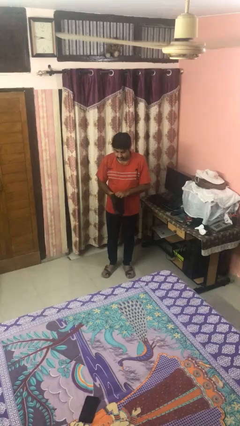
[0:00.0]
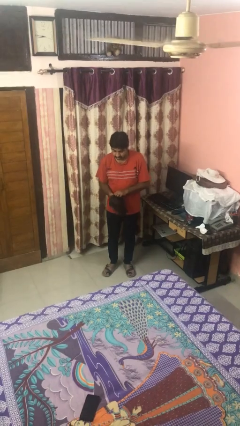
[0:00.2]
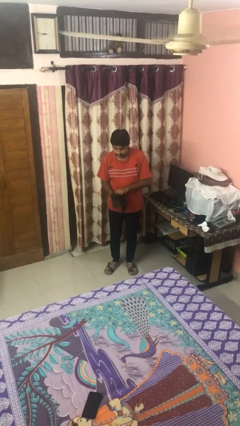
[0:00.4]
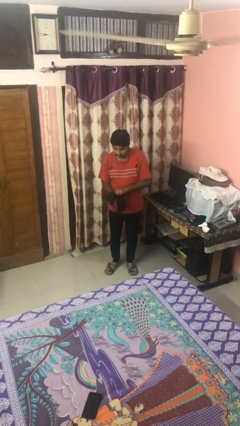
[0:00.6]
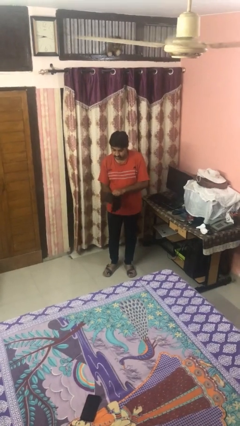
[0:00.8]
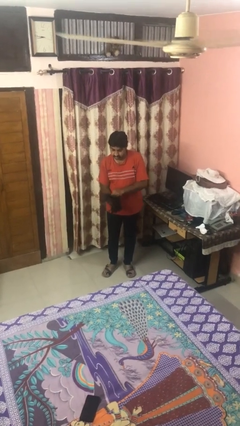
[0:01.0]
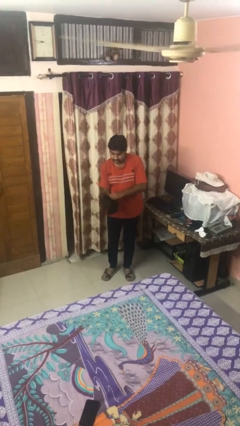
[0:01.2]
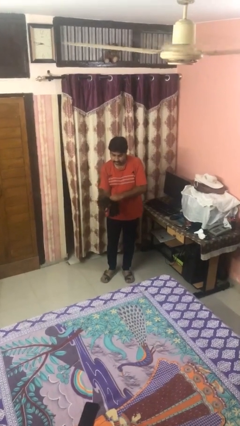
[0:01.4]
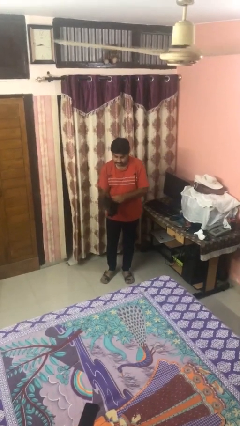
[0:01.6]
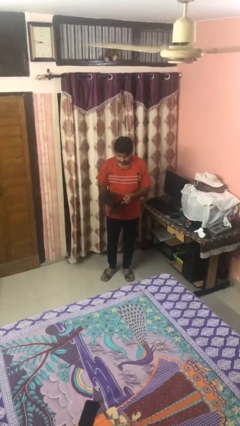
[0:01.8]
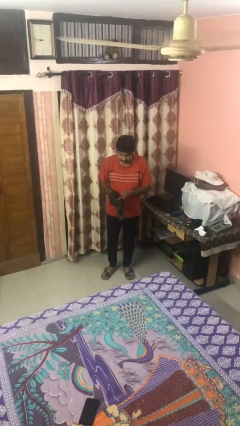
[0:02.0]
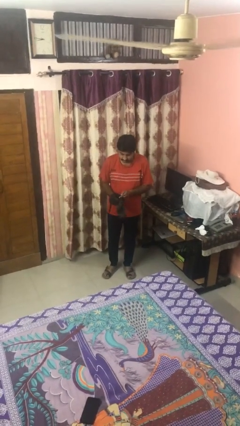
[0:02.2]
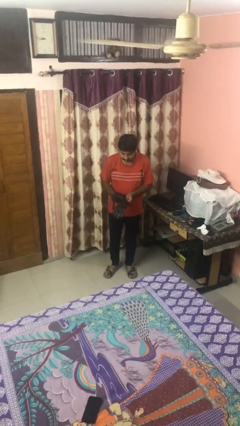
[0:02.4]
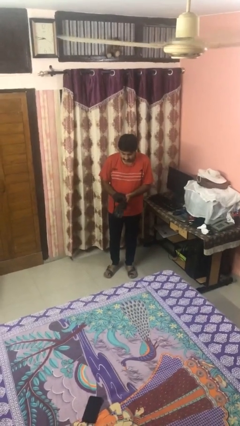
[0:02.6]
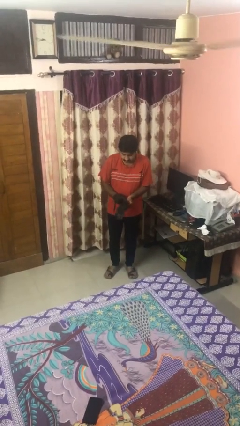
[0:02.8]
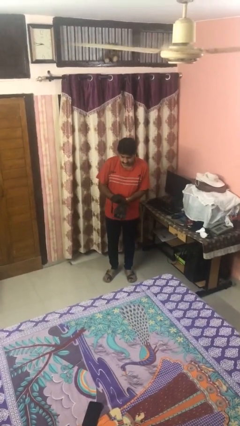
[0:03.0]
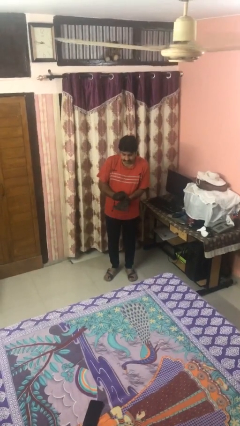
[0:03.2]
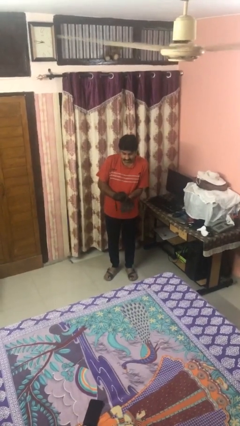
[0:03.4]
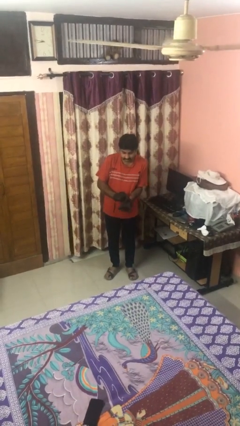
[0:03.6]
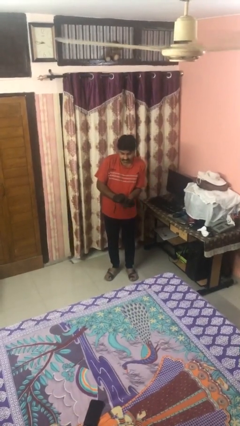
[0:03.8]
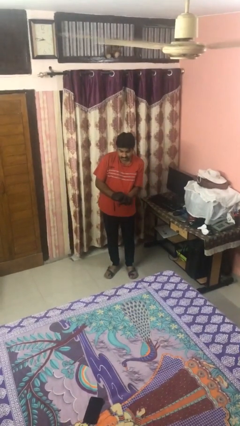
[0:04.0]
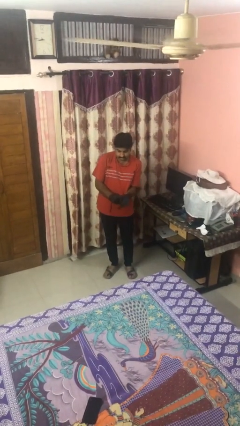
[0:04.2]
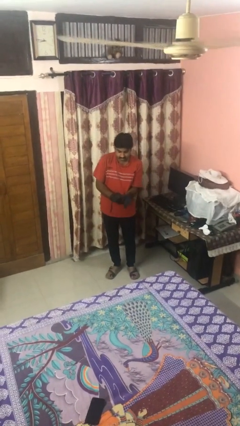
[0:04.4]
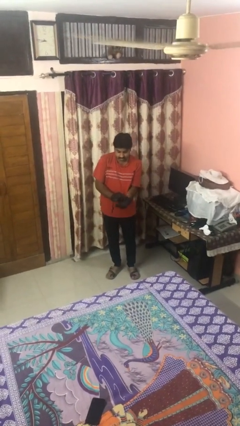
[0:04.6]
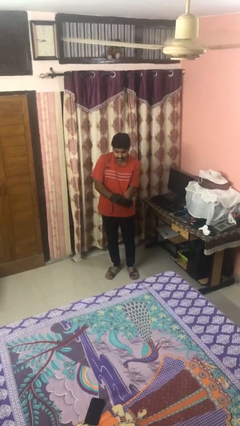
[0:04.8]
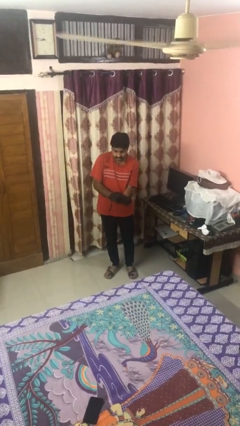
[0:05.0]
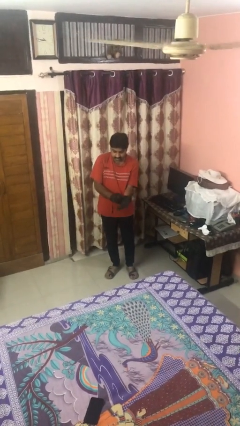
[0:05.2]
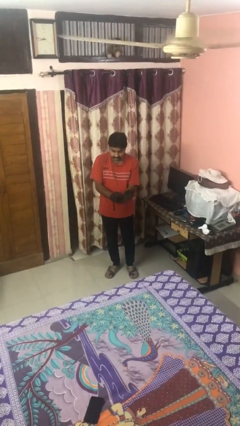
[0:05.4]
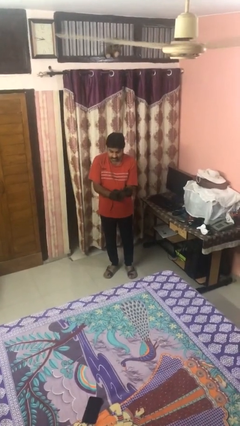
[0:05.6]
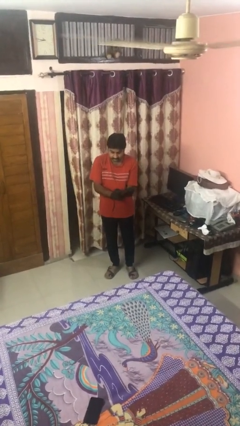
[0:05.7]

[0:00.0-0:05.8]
person puts on gloves

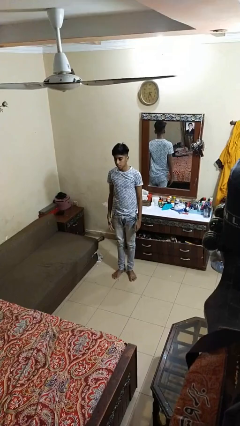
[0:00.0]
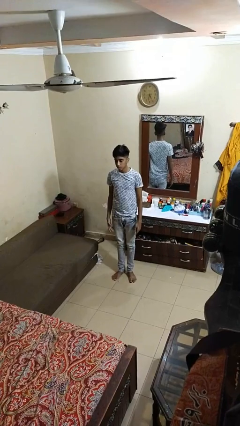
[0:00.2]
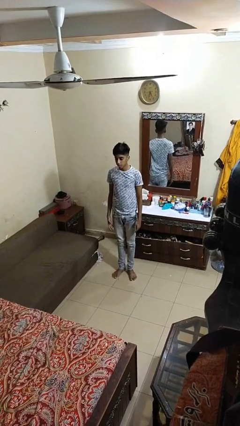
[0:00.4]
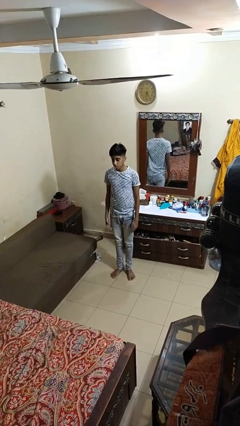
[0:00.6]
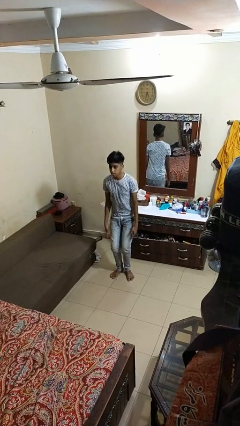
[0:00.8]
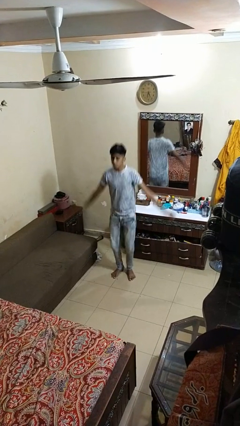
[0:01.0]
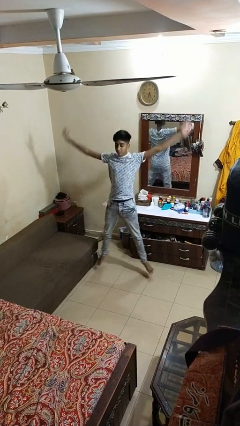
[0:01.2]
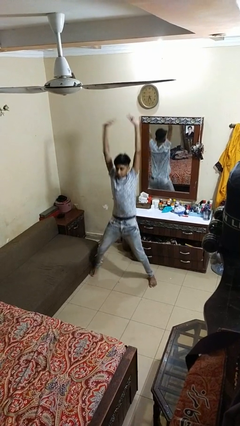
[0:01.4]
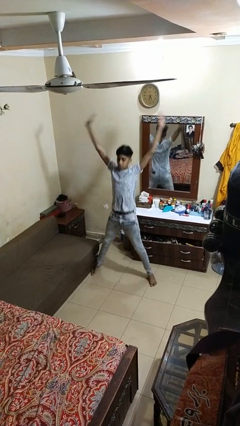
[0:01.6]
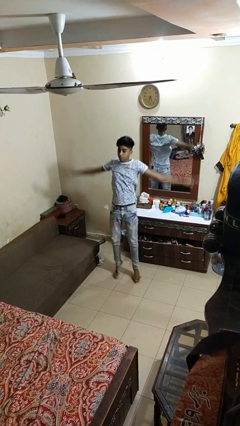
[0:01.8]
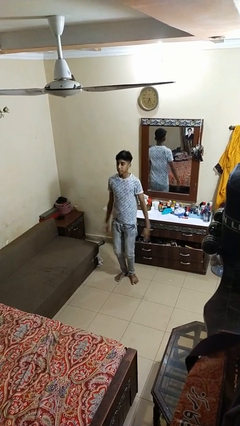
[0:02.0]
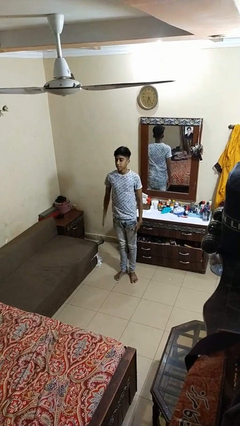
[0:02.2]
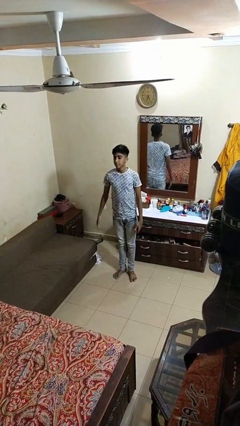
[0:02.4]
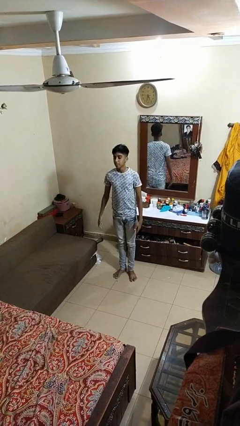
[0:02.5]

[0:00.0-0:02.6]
person exercises with jumping jacks

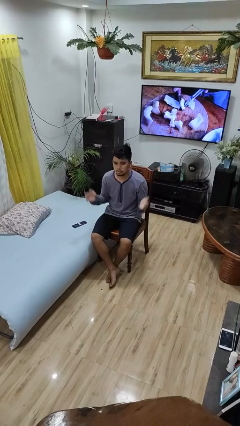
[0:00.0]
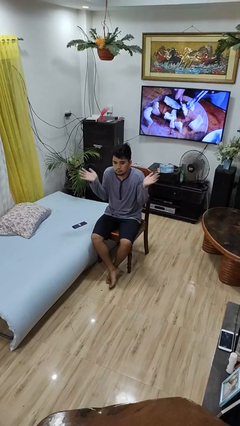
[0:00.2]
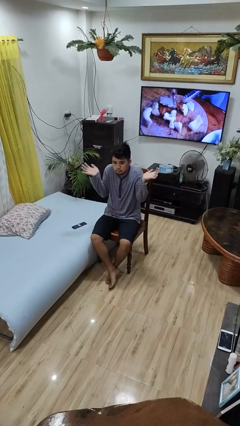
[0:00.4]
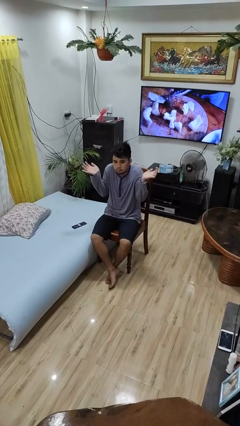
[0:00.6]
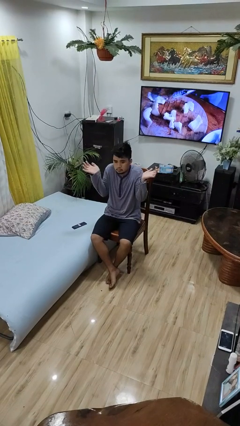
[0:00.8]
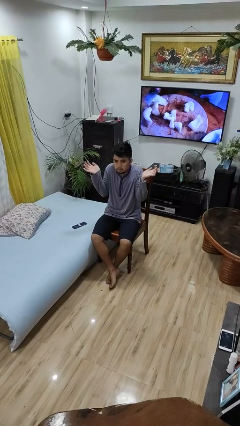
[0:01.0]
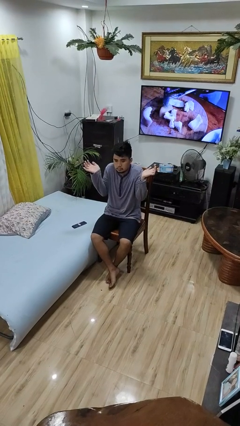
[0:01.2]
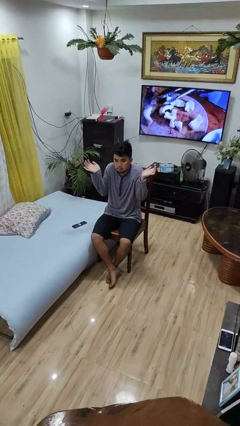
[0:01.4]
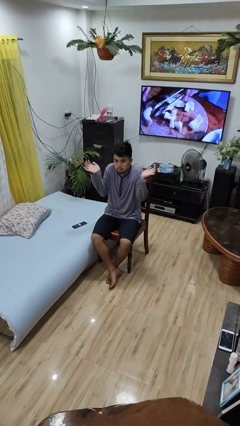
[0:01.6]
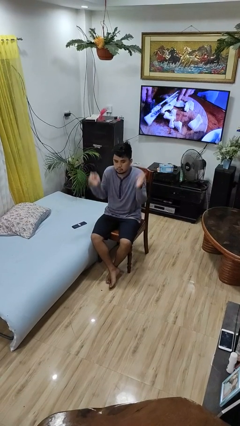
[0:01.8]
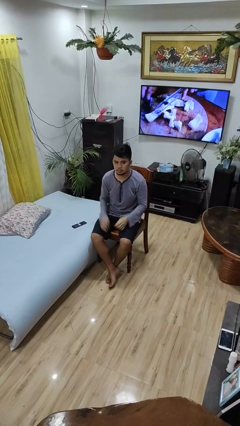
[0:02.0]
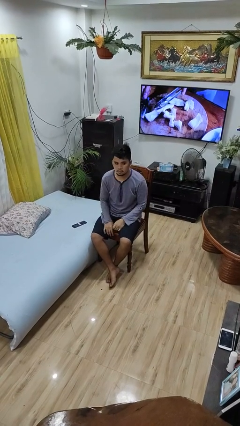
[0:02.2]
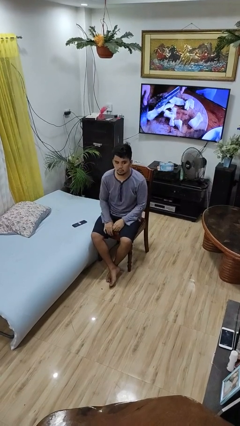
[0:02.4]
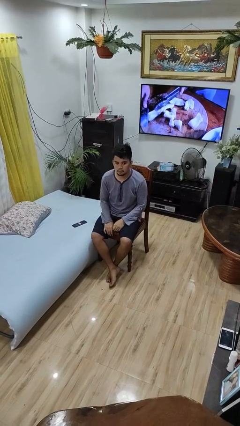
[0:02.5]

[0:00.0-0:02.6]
person shrugs

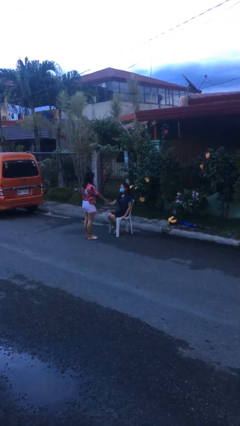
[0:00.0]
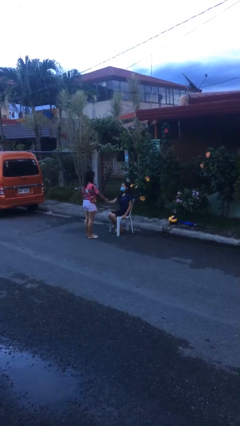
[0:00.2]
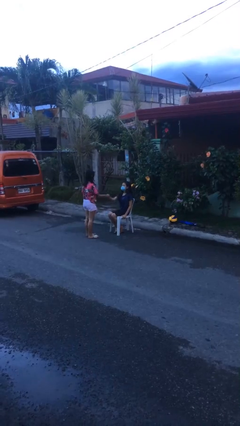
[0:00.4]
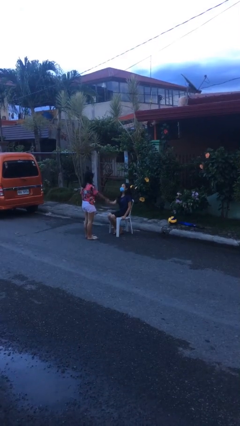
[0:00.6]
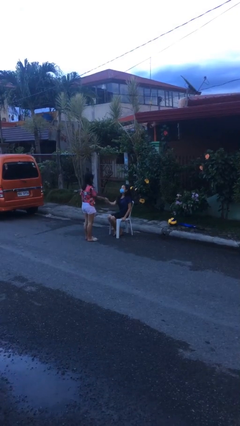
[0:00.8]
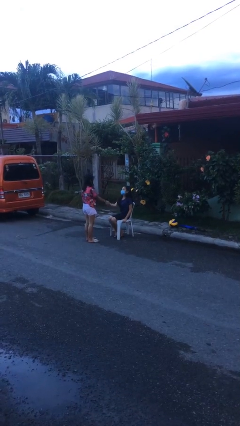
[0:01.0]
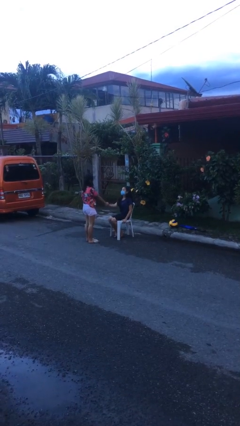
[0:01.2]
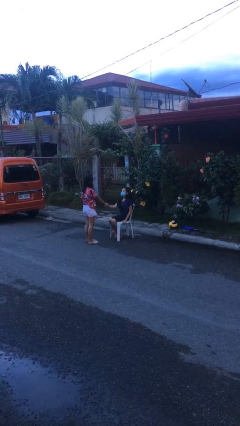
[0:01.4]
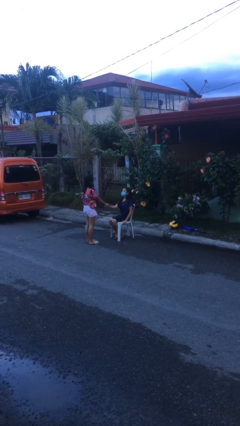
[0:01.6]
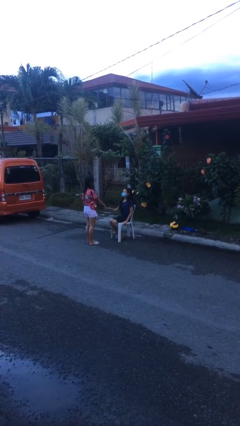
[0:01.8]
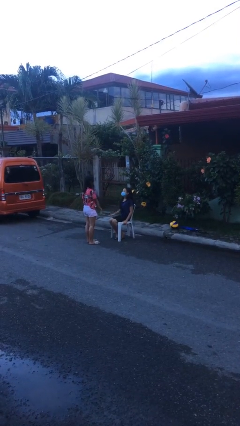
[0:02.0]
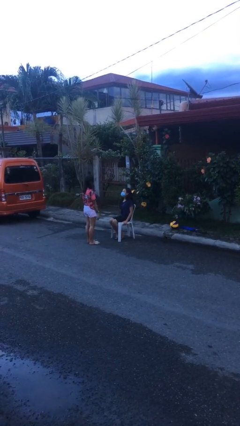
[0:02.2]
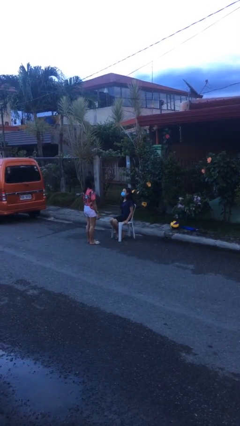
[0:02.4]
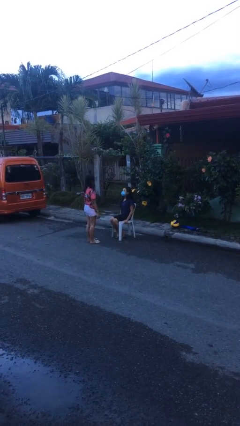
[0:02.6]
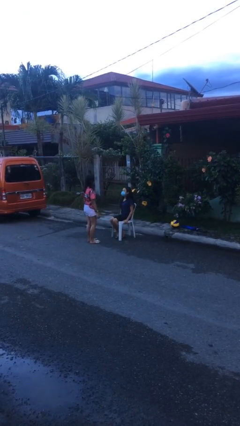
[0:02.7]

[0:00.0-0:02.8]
person shakes hand

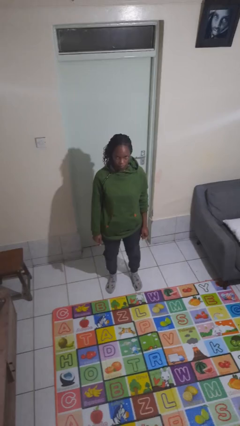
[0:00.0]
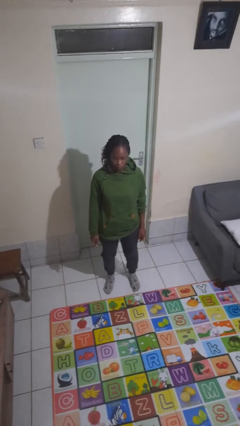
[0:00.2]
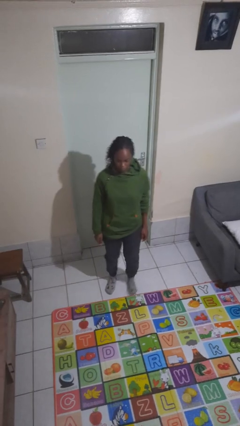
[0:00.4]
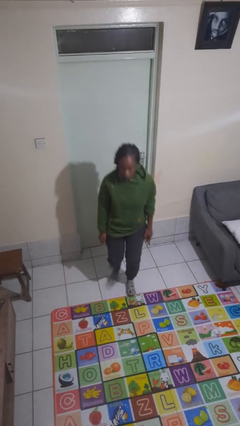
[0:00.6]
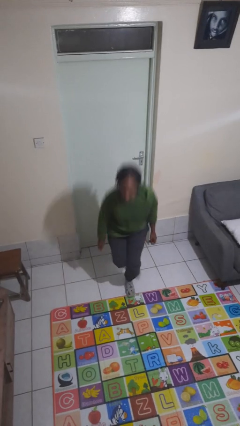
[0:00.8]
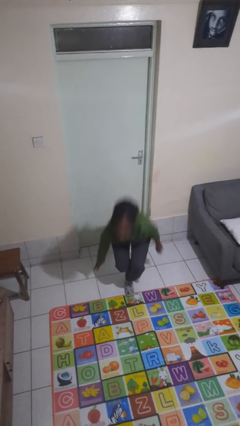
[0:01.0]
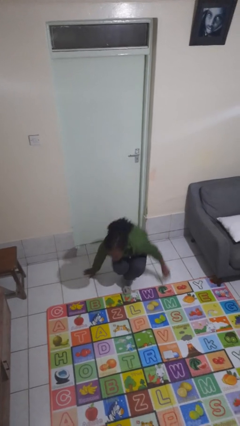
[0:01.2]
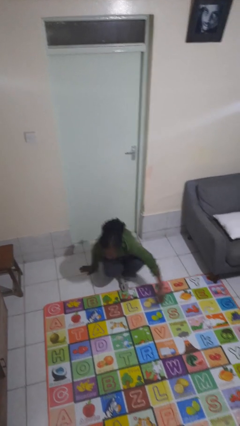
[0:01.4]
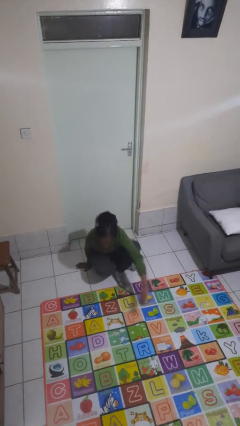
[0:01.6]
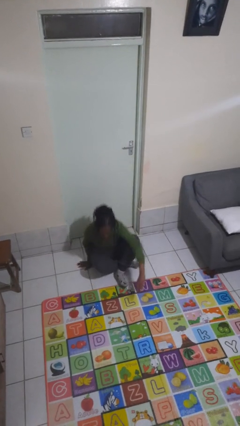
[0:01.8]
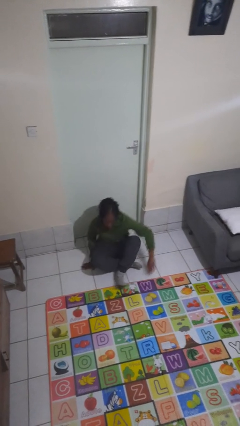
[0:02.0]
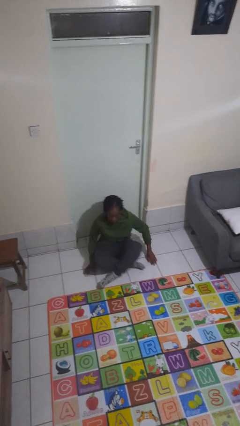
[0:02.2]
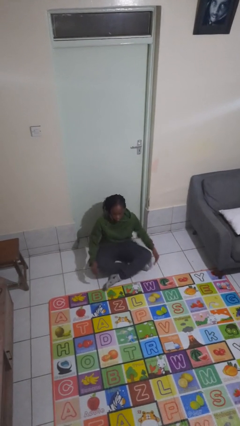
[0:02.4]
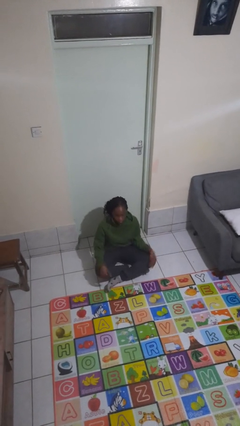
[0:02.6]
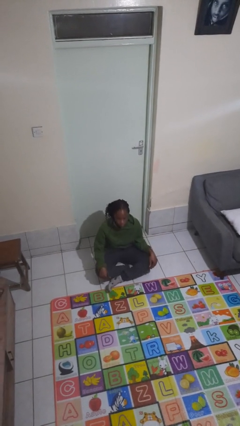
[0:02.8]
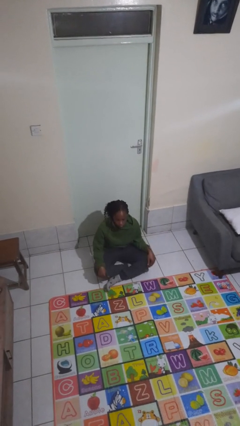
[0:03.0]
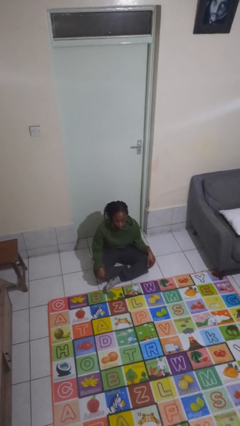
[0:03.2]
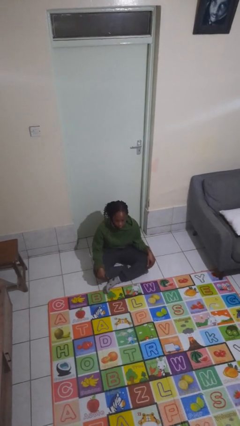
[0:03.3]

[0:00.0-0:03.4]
person sits crisscross
